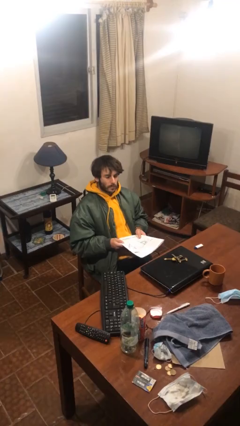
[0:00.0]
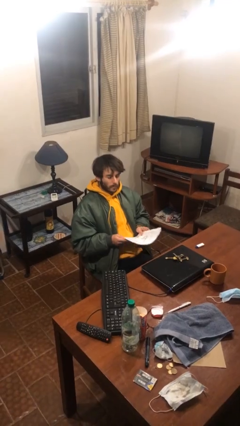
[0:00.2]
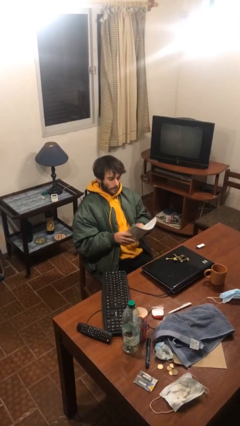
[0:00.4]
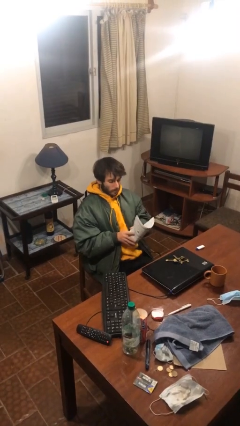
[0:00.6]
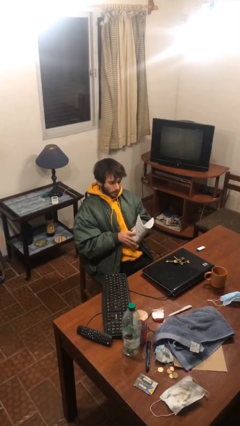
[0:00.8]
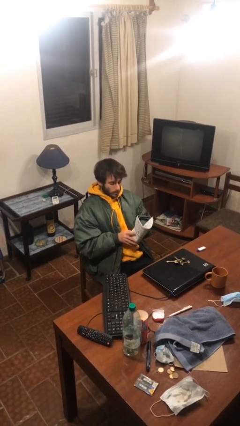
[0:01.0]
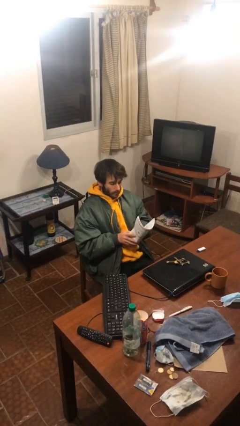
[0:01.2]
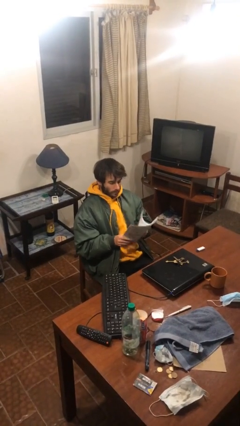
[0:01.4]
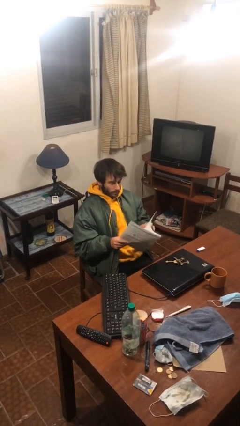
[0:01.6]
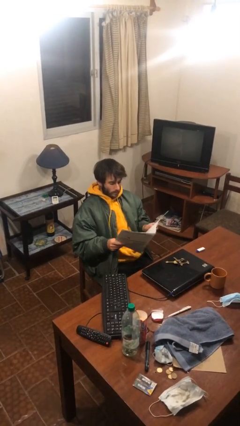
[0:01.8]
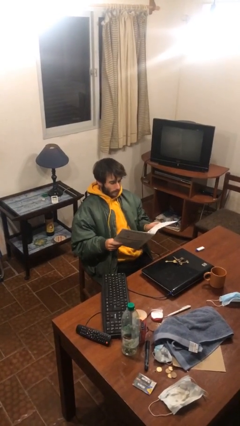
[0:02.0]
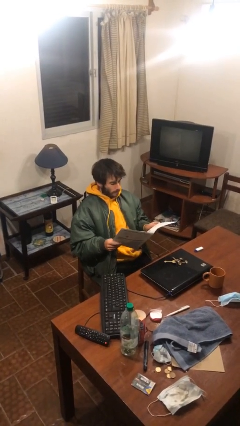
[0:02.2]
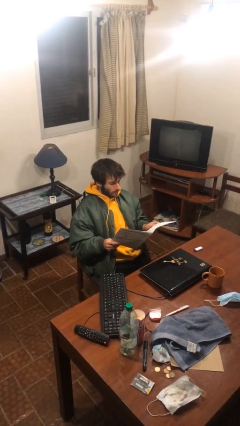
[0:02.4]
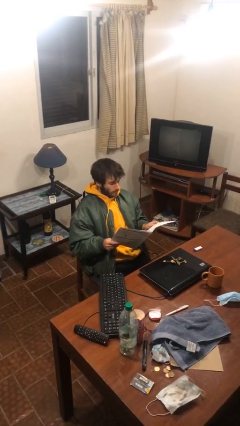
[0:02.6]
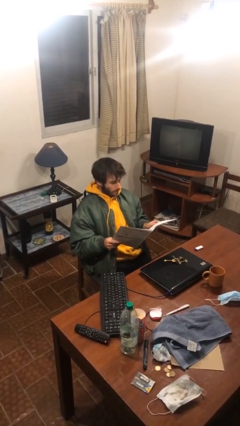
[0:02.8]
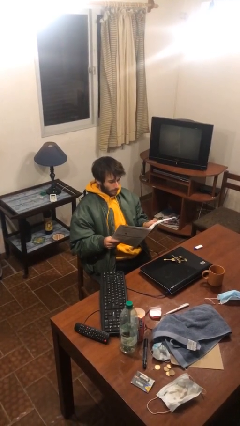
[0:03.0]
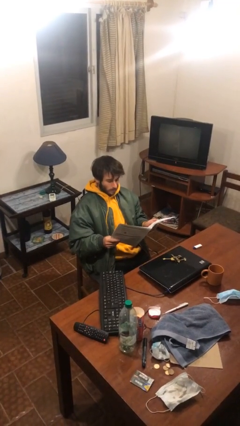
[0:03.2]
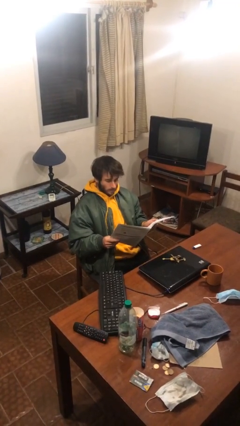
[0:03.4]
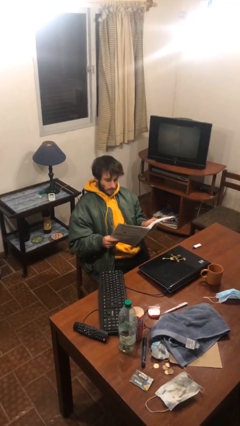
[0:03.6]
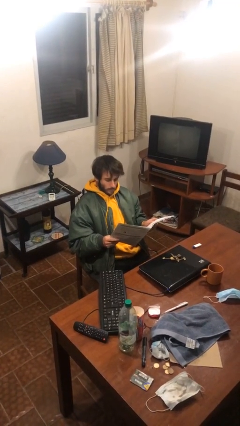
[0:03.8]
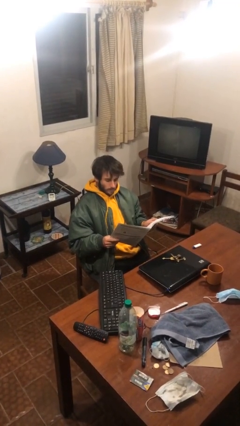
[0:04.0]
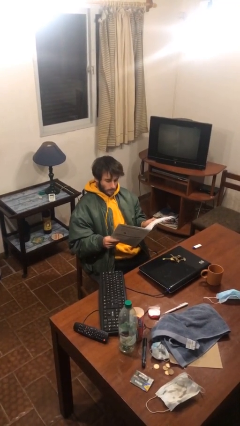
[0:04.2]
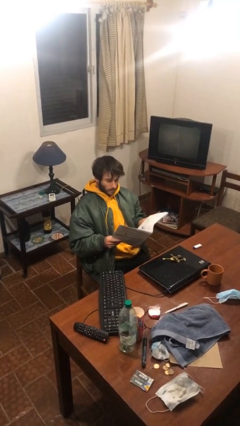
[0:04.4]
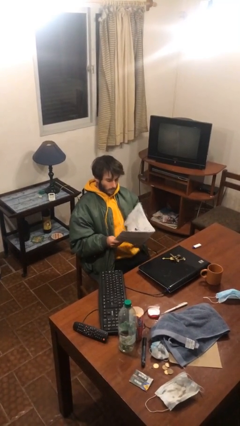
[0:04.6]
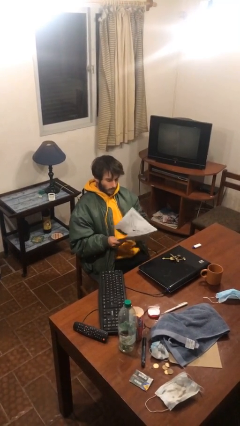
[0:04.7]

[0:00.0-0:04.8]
person reads document

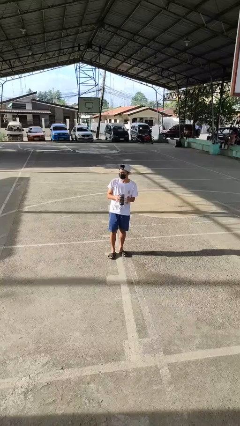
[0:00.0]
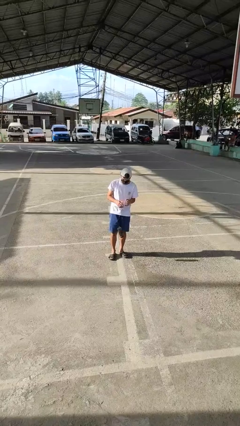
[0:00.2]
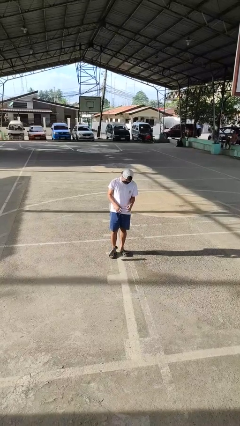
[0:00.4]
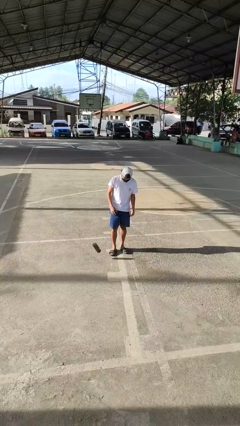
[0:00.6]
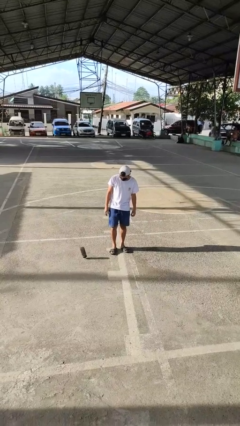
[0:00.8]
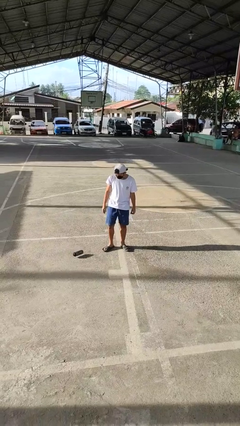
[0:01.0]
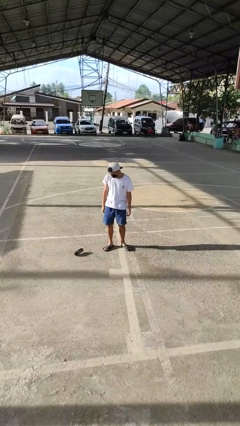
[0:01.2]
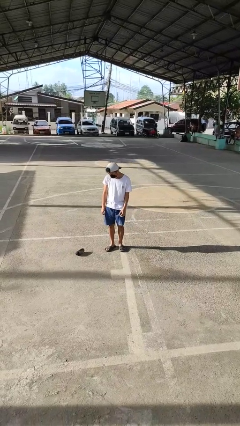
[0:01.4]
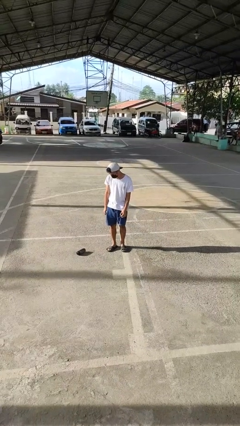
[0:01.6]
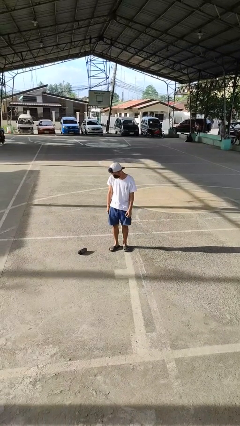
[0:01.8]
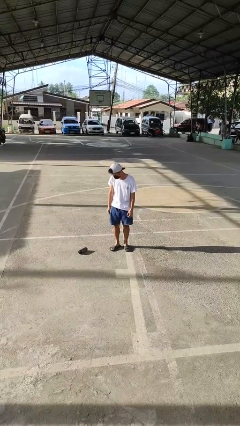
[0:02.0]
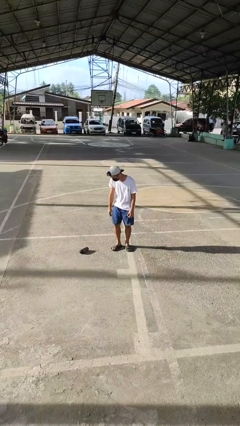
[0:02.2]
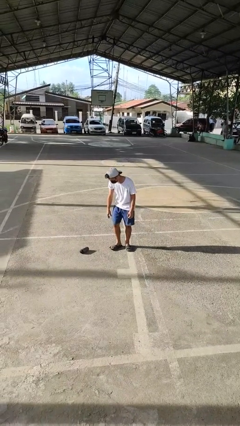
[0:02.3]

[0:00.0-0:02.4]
person drops object

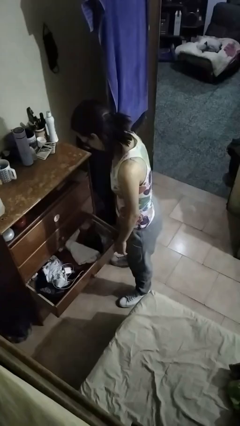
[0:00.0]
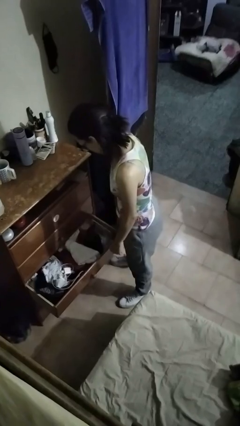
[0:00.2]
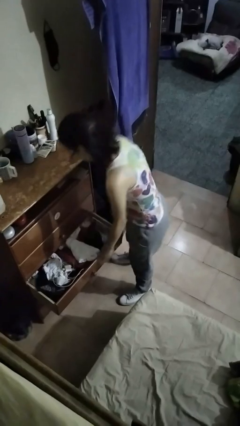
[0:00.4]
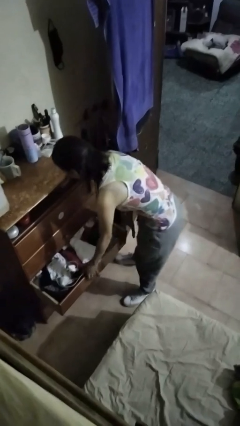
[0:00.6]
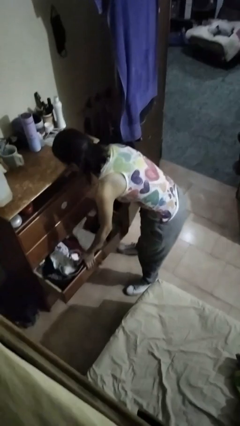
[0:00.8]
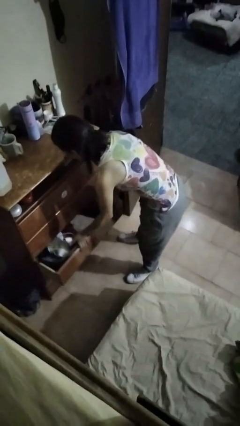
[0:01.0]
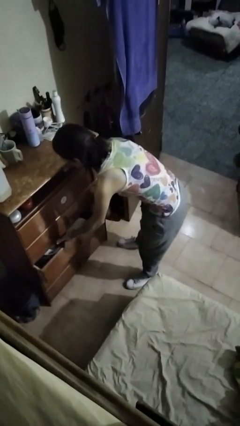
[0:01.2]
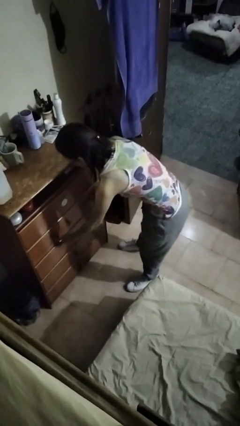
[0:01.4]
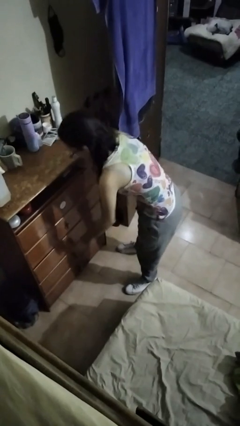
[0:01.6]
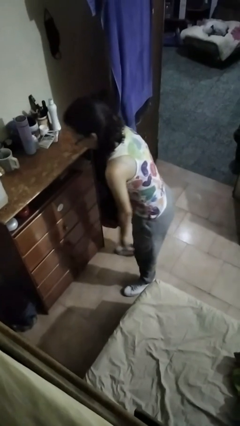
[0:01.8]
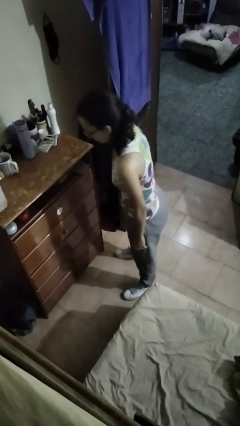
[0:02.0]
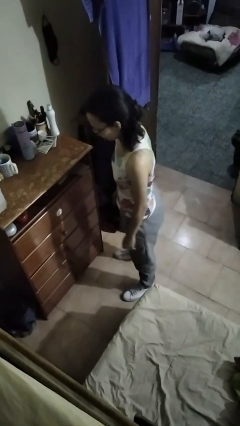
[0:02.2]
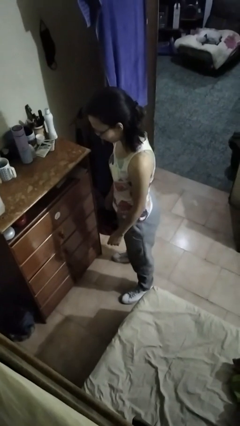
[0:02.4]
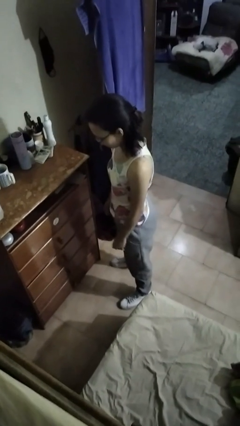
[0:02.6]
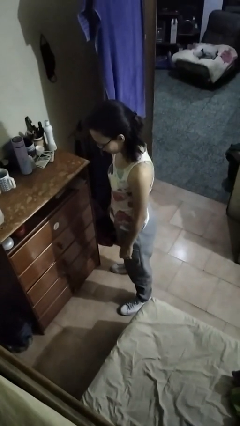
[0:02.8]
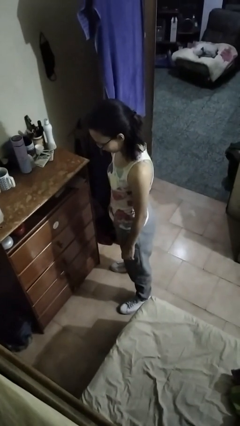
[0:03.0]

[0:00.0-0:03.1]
person closes dresser drawer

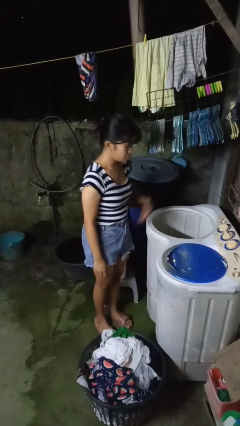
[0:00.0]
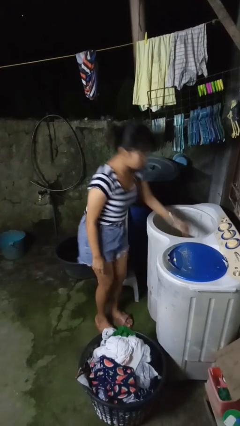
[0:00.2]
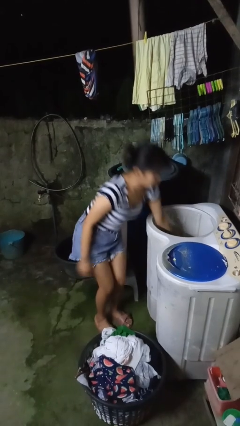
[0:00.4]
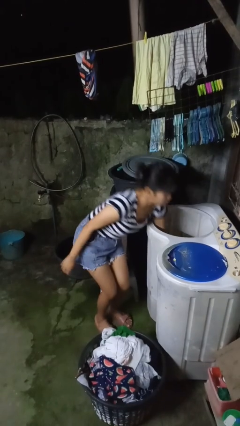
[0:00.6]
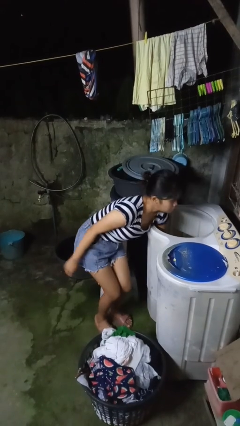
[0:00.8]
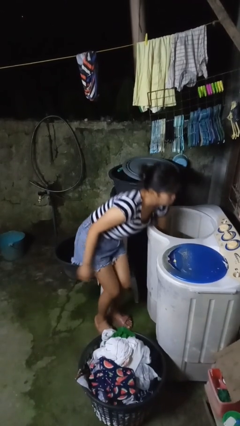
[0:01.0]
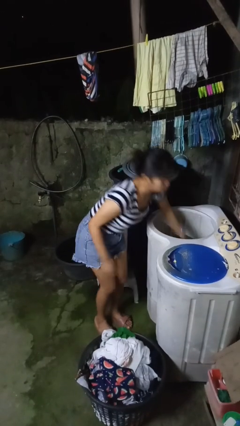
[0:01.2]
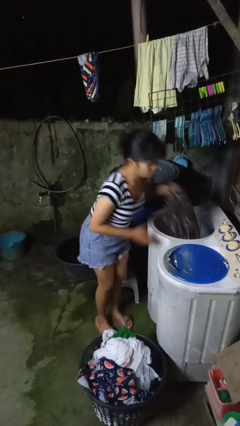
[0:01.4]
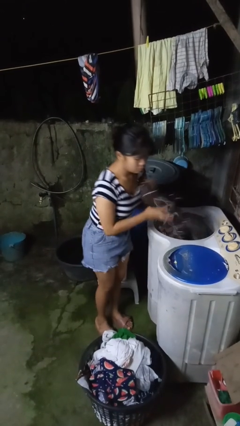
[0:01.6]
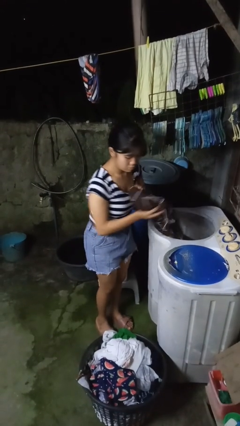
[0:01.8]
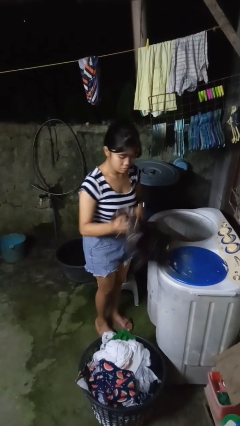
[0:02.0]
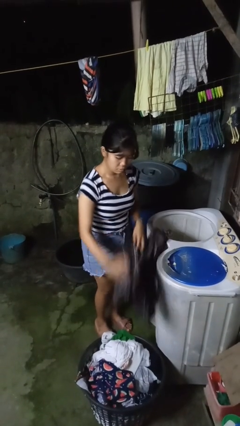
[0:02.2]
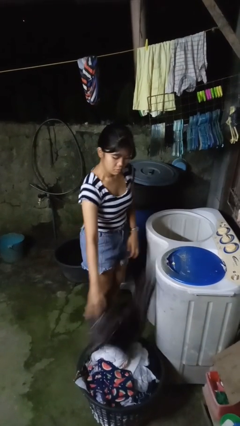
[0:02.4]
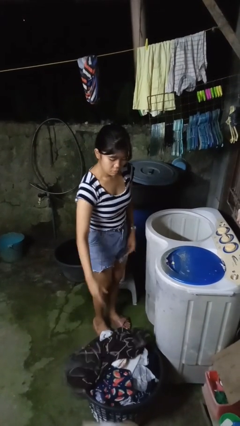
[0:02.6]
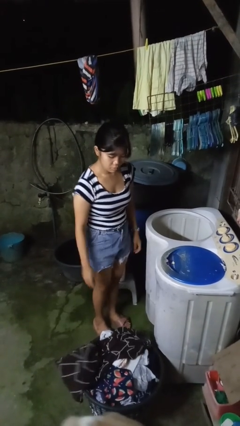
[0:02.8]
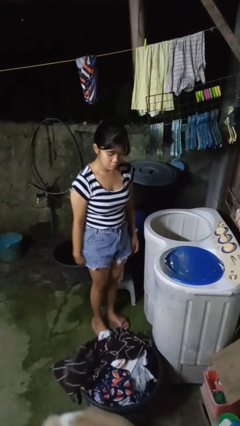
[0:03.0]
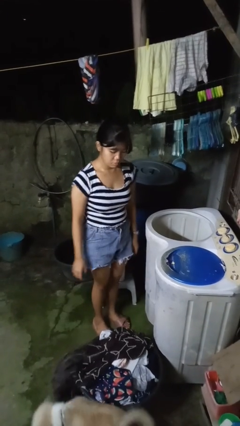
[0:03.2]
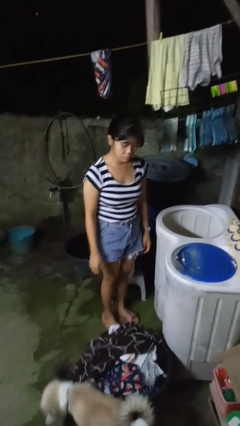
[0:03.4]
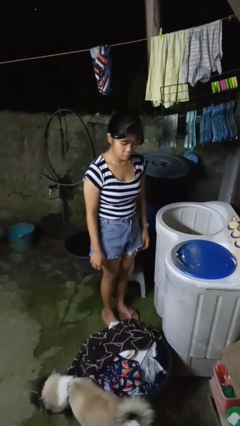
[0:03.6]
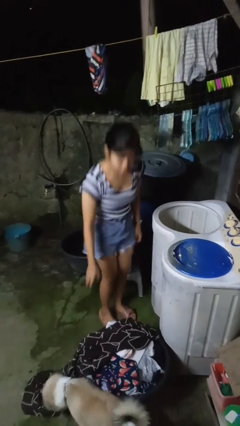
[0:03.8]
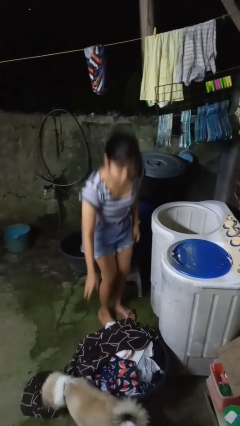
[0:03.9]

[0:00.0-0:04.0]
person unloads clotheswasher

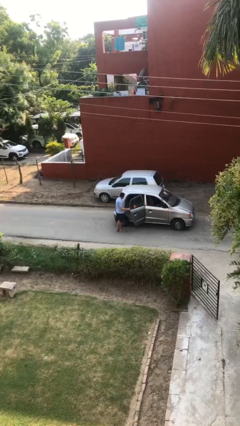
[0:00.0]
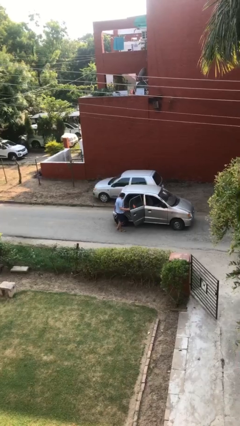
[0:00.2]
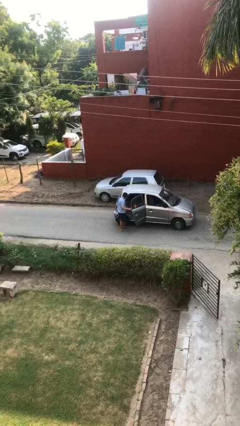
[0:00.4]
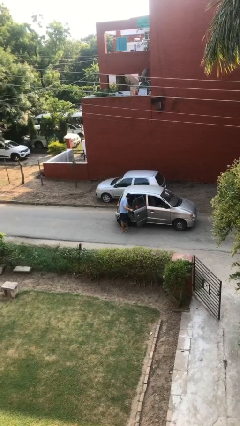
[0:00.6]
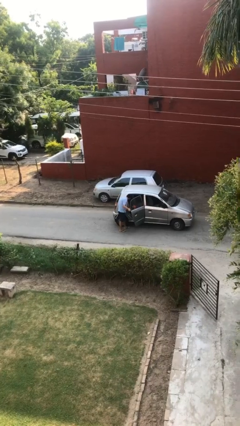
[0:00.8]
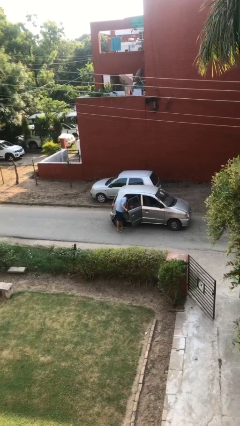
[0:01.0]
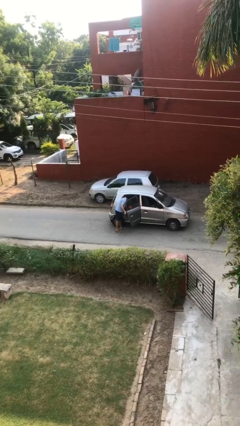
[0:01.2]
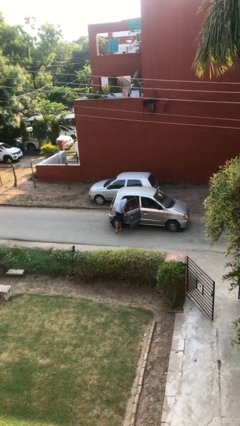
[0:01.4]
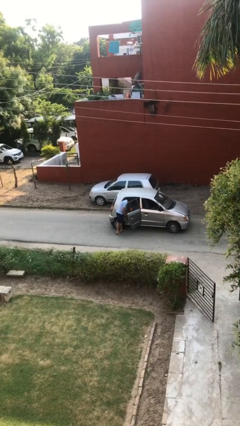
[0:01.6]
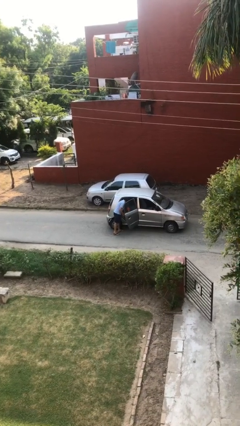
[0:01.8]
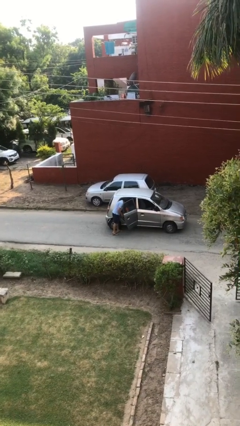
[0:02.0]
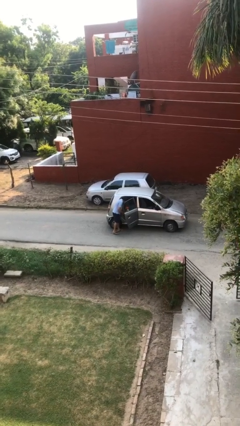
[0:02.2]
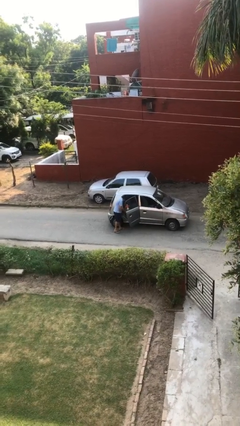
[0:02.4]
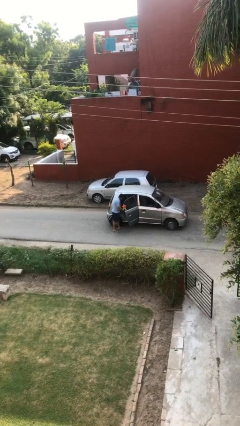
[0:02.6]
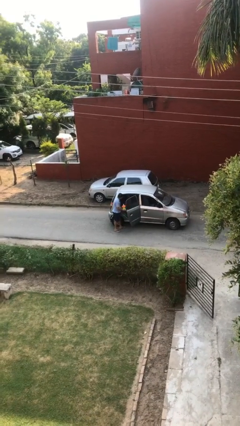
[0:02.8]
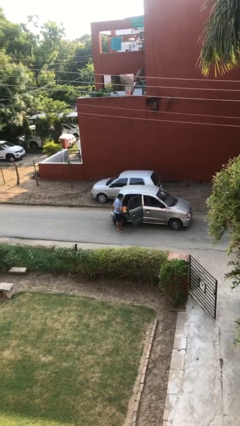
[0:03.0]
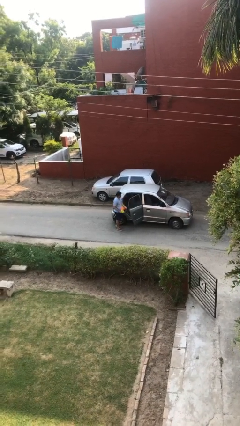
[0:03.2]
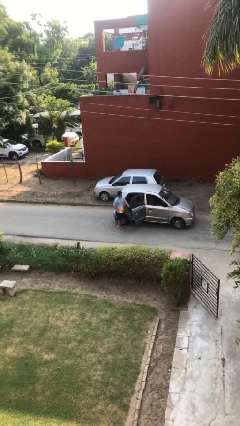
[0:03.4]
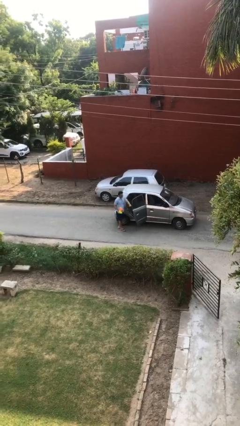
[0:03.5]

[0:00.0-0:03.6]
person unloads car

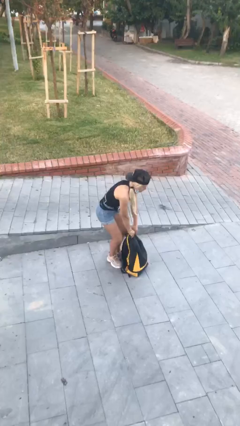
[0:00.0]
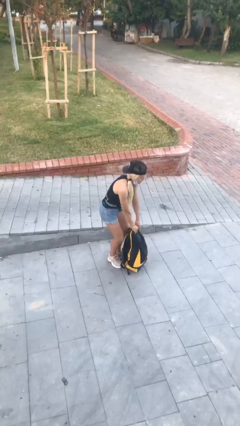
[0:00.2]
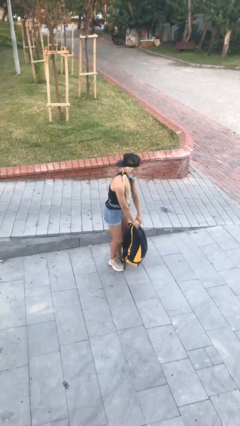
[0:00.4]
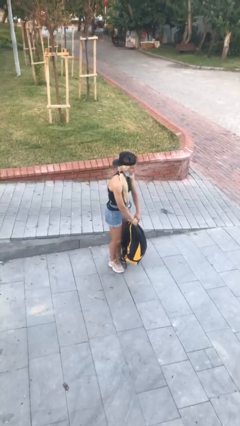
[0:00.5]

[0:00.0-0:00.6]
person picks up object from floor
